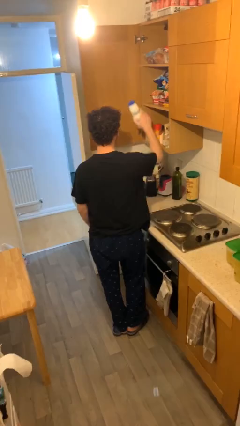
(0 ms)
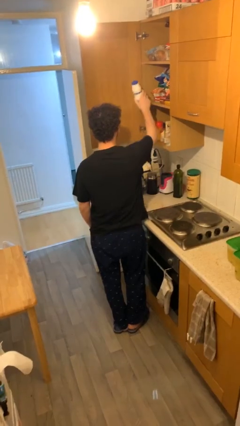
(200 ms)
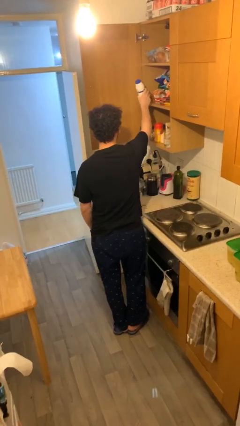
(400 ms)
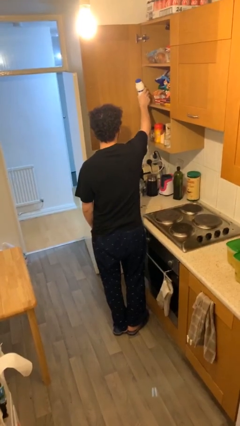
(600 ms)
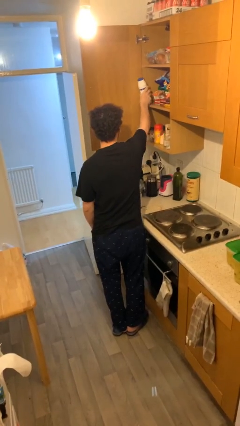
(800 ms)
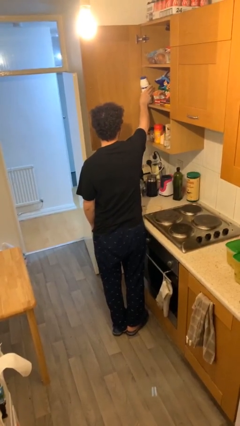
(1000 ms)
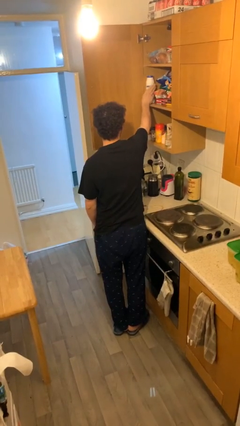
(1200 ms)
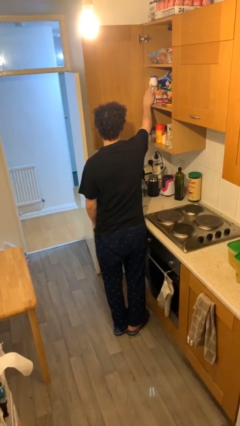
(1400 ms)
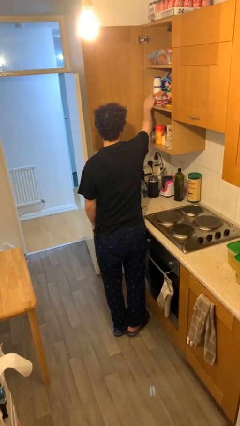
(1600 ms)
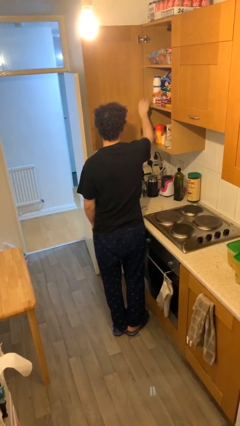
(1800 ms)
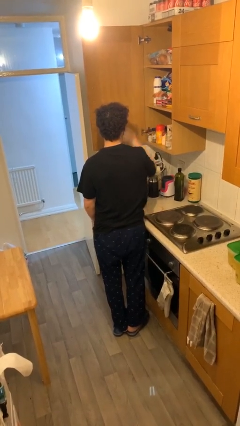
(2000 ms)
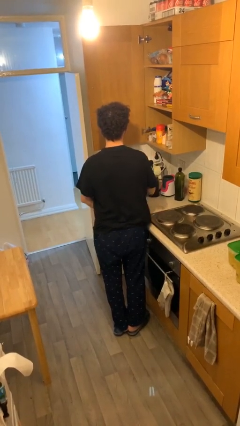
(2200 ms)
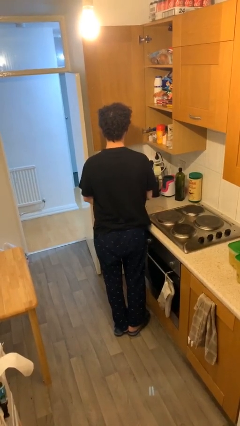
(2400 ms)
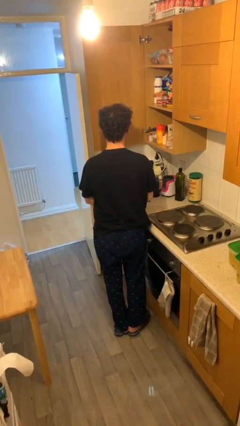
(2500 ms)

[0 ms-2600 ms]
person puts down object on shelf

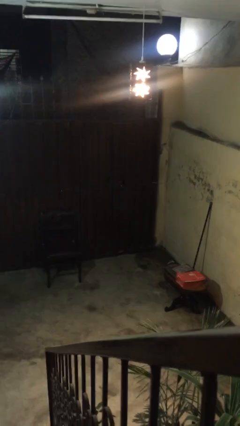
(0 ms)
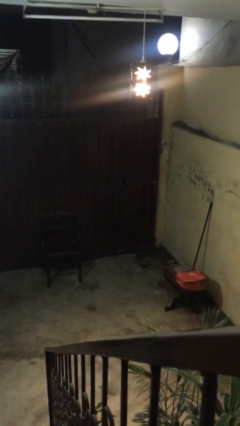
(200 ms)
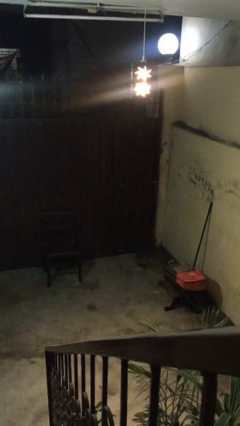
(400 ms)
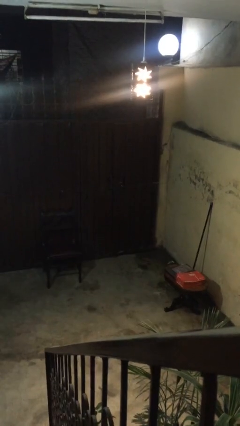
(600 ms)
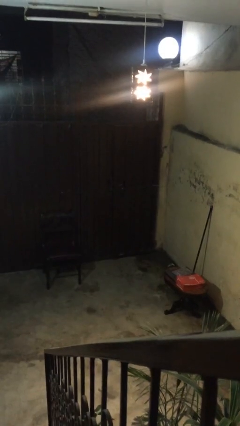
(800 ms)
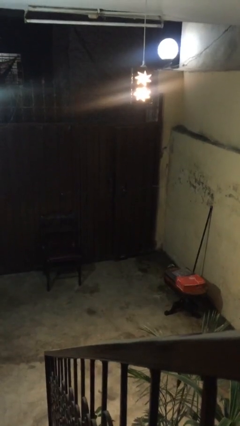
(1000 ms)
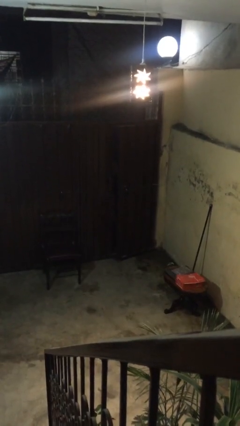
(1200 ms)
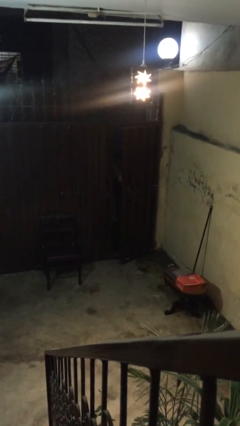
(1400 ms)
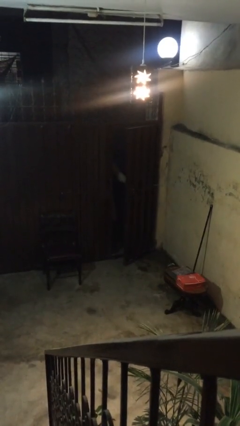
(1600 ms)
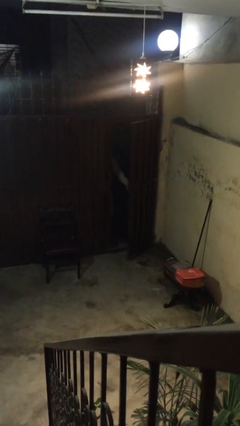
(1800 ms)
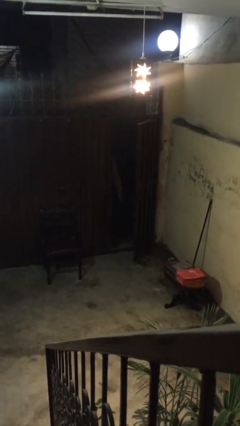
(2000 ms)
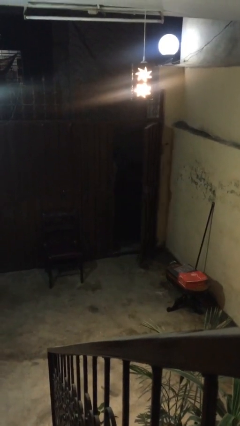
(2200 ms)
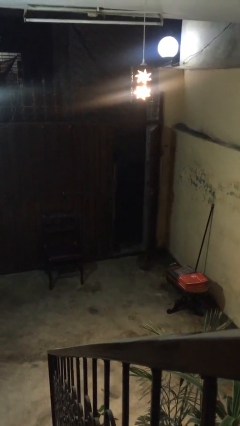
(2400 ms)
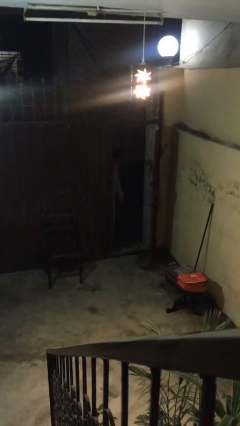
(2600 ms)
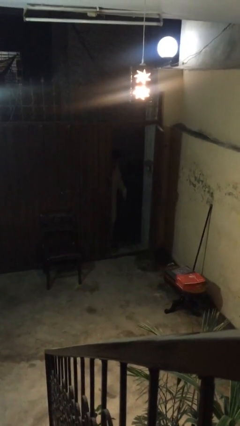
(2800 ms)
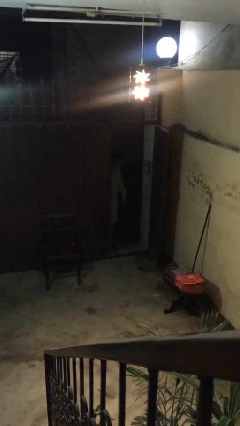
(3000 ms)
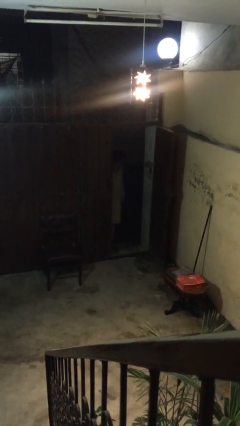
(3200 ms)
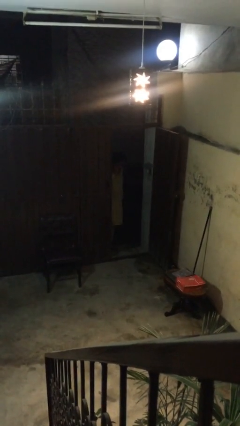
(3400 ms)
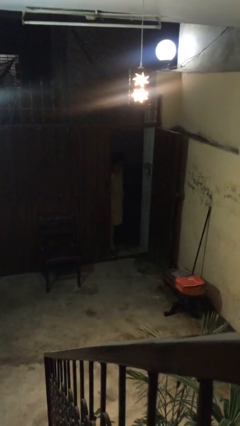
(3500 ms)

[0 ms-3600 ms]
person opens facility door

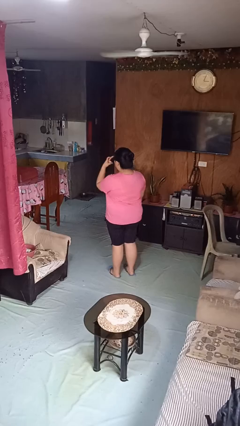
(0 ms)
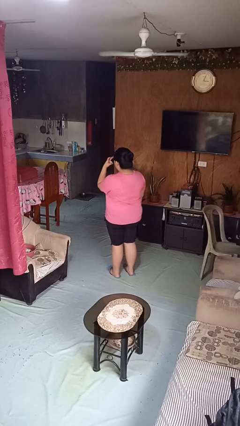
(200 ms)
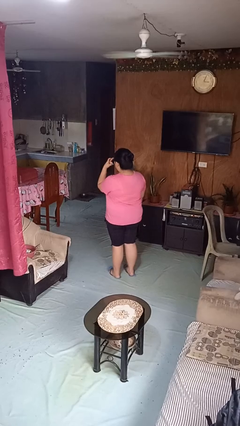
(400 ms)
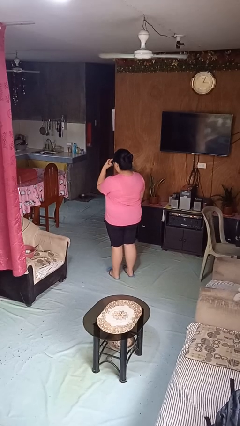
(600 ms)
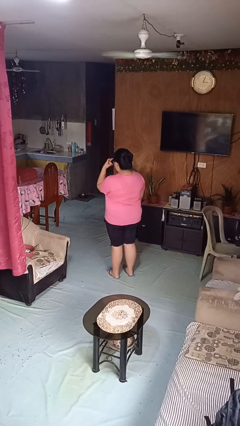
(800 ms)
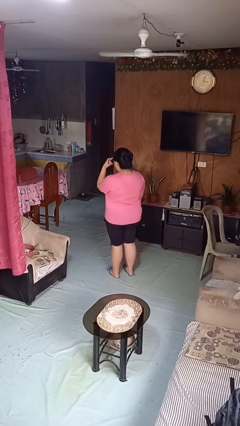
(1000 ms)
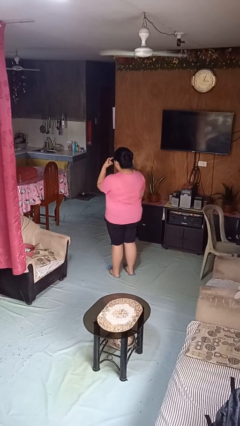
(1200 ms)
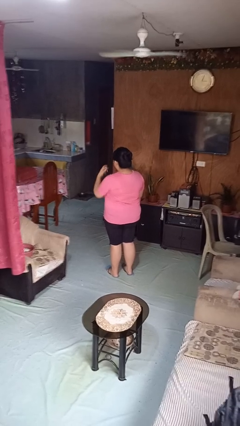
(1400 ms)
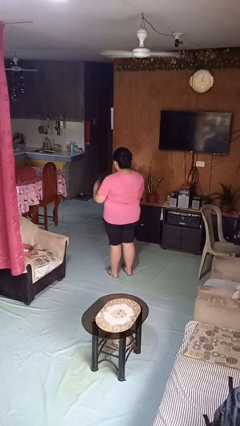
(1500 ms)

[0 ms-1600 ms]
person gestures watch closely

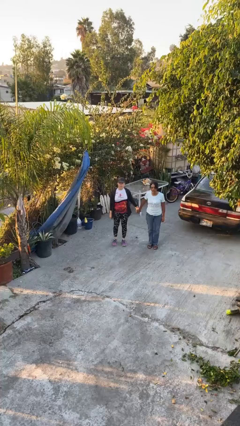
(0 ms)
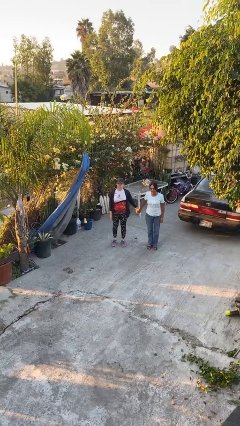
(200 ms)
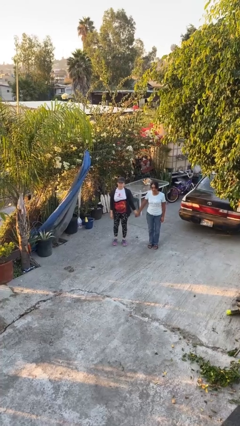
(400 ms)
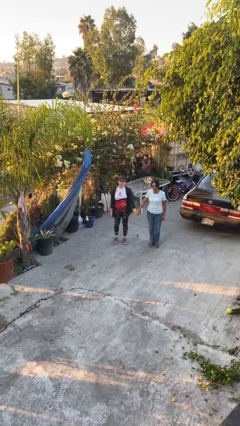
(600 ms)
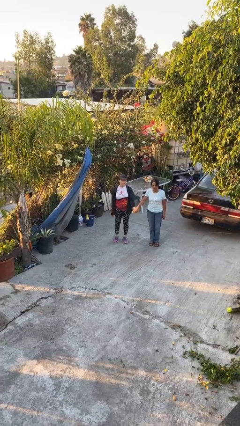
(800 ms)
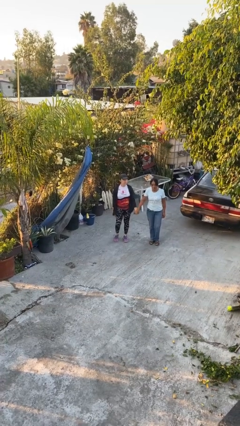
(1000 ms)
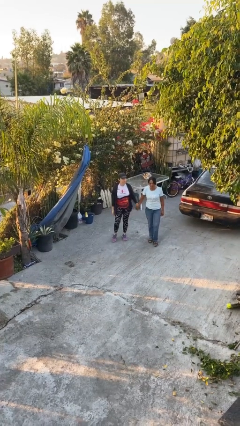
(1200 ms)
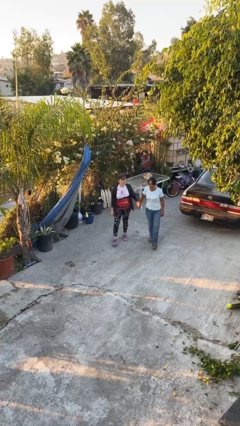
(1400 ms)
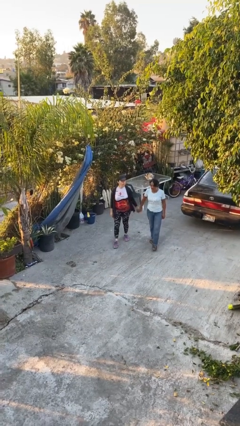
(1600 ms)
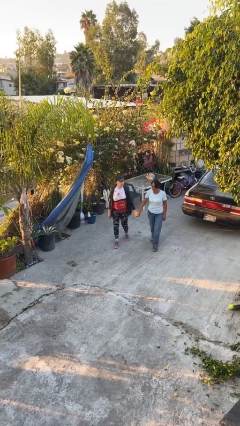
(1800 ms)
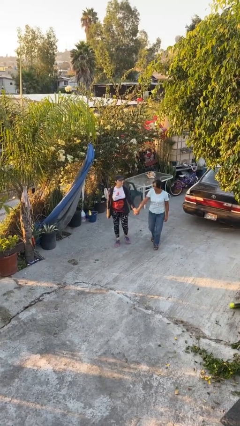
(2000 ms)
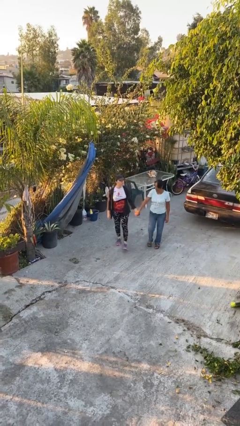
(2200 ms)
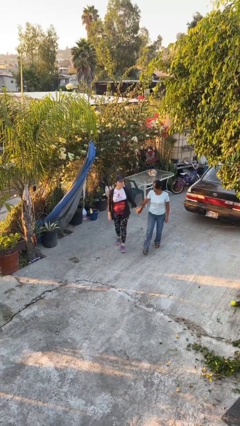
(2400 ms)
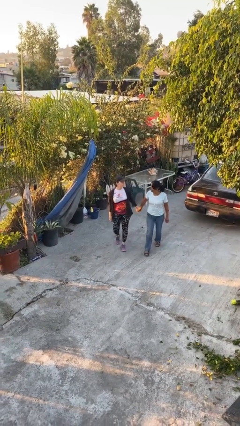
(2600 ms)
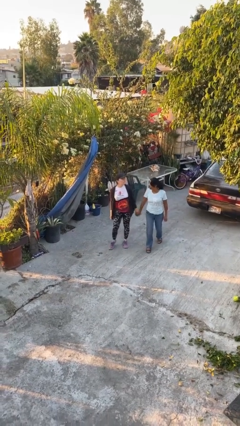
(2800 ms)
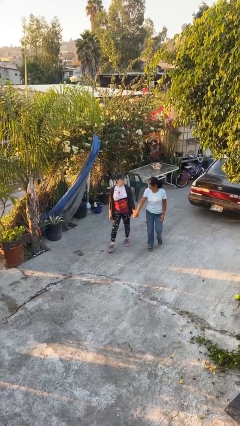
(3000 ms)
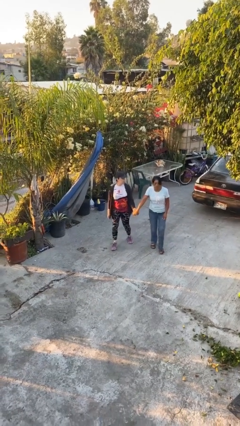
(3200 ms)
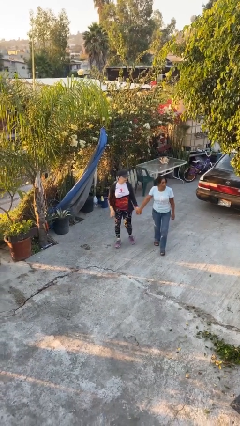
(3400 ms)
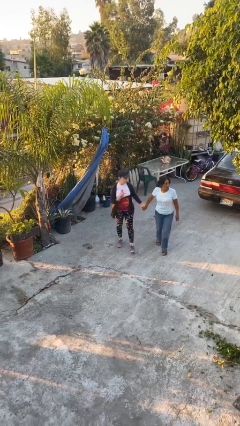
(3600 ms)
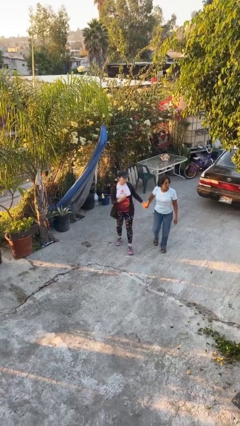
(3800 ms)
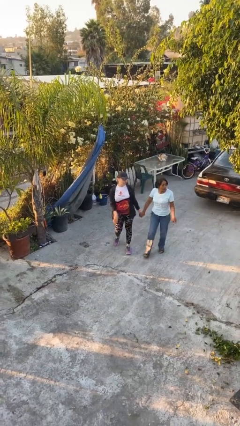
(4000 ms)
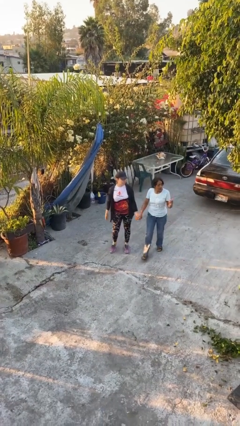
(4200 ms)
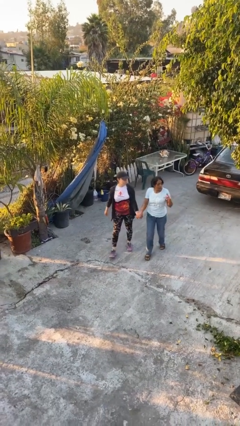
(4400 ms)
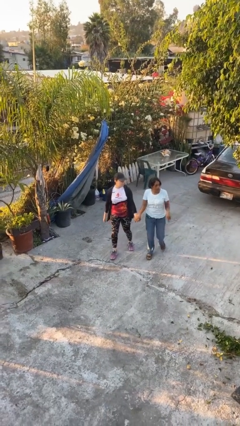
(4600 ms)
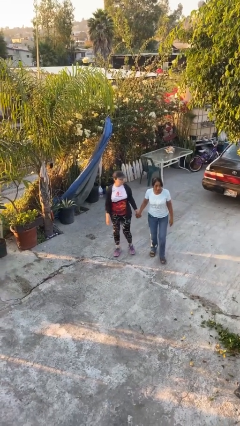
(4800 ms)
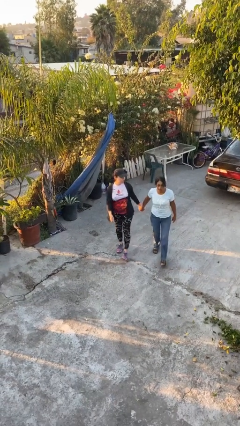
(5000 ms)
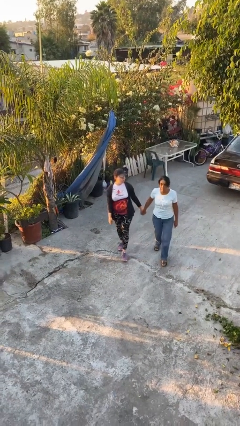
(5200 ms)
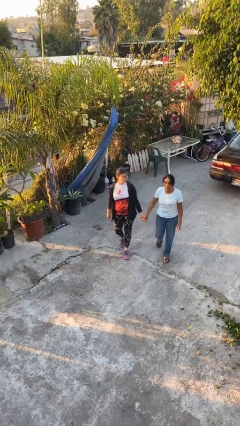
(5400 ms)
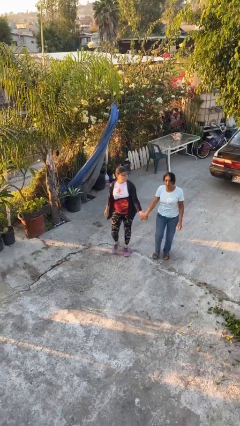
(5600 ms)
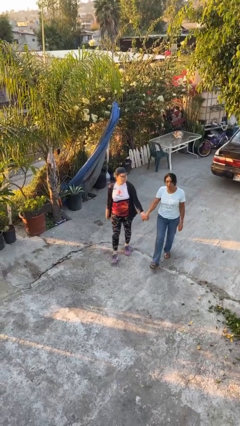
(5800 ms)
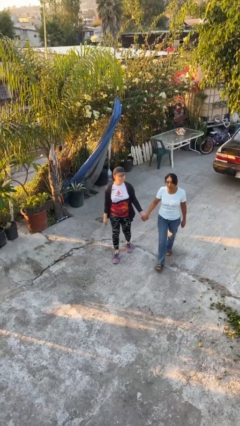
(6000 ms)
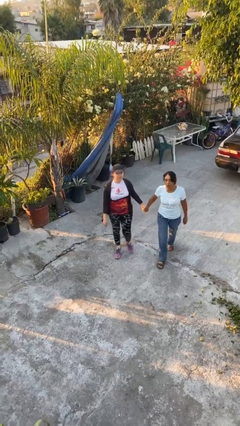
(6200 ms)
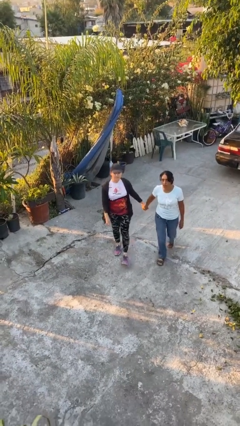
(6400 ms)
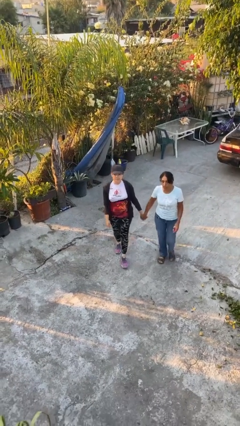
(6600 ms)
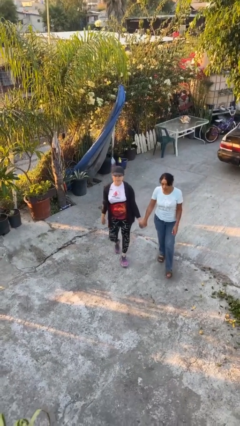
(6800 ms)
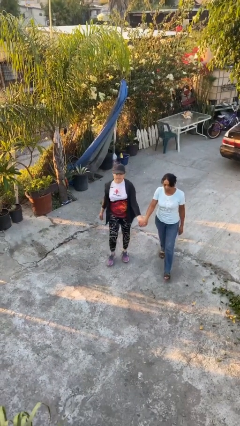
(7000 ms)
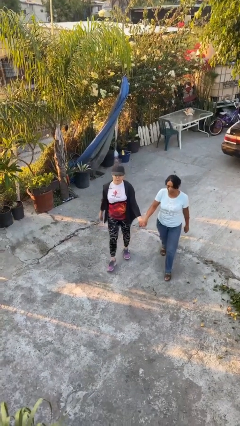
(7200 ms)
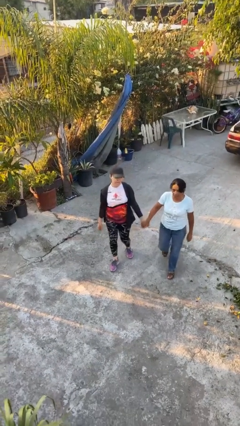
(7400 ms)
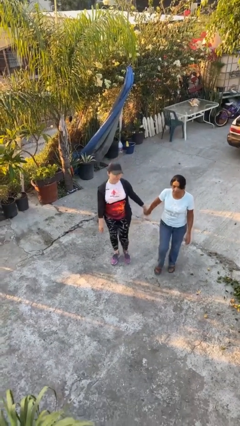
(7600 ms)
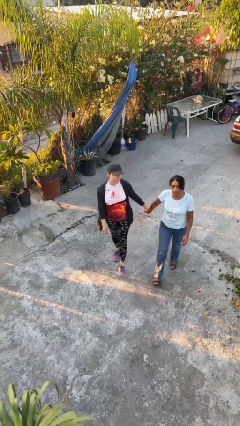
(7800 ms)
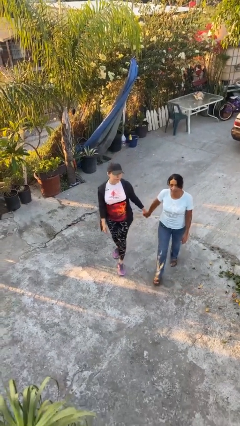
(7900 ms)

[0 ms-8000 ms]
person holds hand

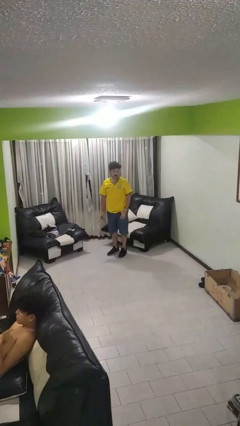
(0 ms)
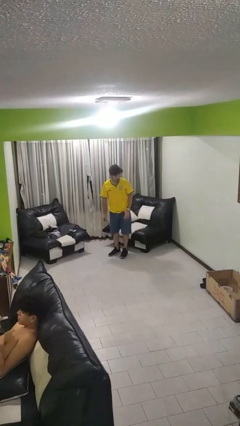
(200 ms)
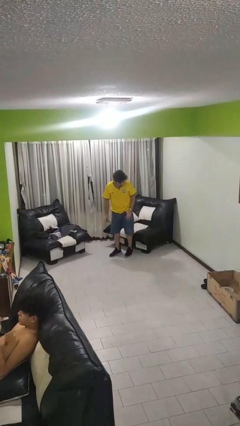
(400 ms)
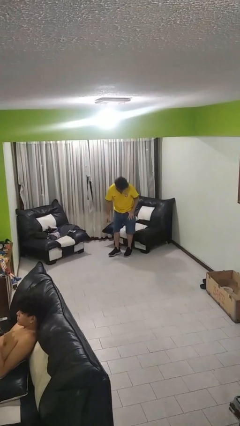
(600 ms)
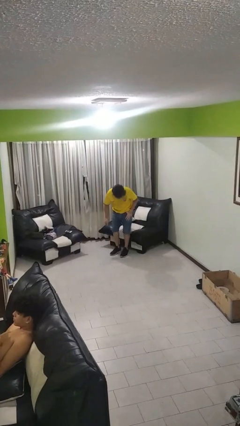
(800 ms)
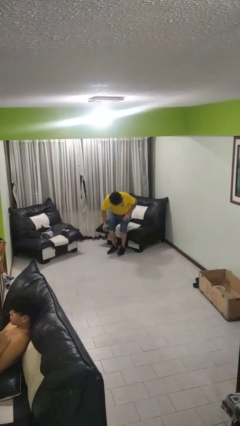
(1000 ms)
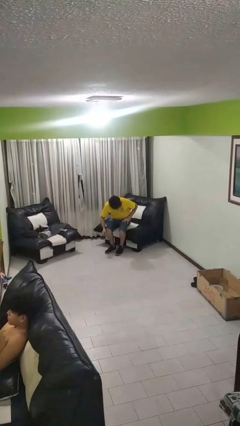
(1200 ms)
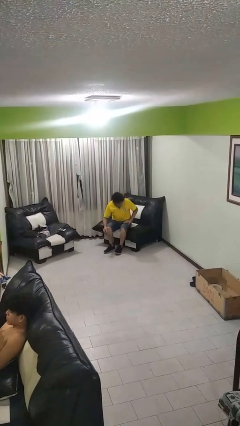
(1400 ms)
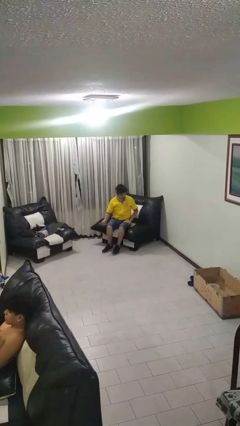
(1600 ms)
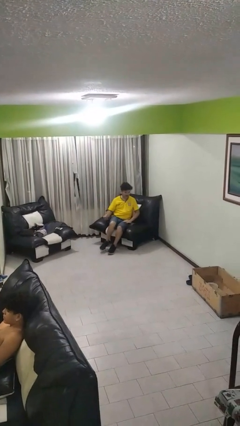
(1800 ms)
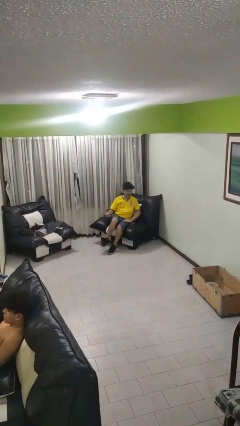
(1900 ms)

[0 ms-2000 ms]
person lies down on couch
